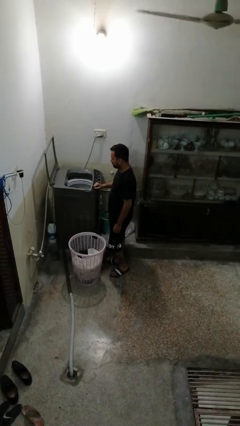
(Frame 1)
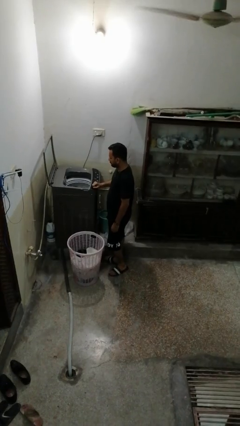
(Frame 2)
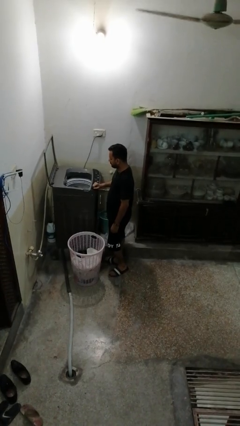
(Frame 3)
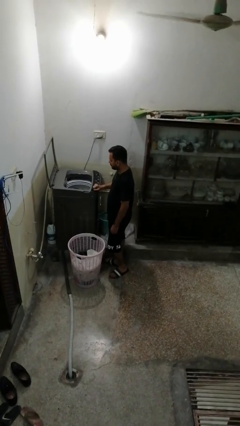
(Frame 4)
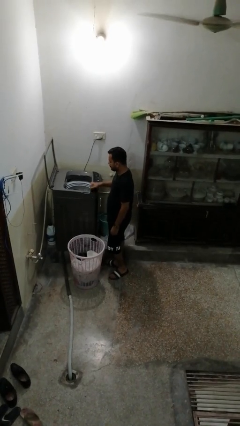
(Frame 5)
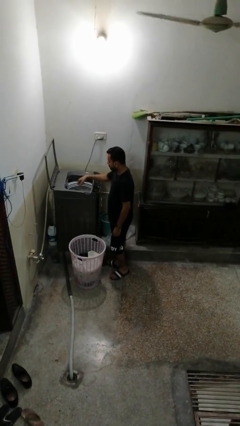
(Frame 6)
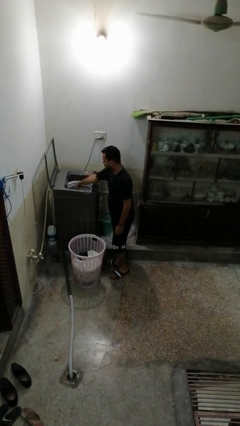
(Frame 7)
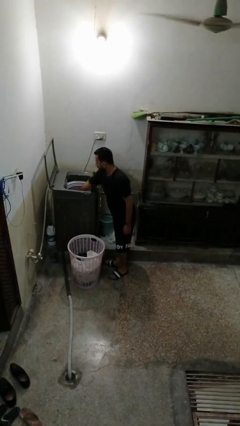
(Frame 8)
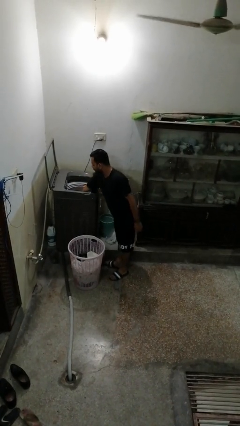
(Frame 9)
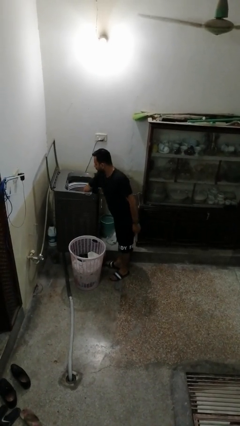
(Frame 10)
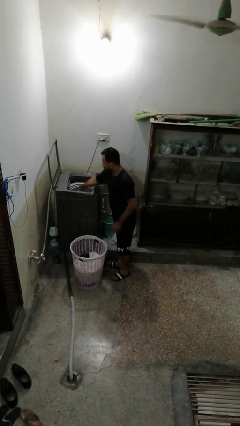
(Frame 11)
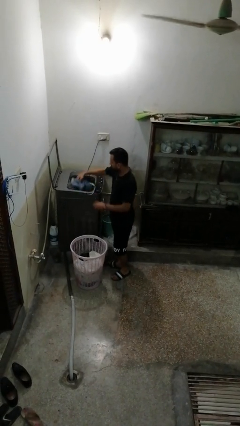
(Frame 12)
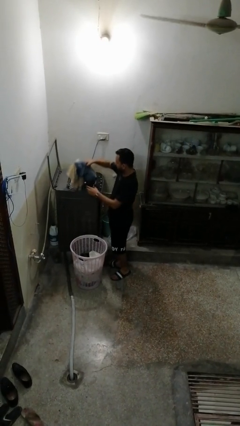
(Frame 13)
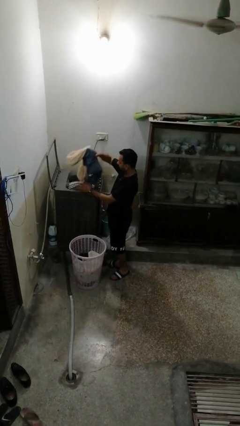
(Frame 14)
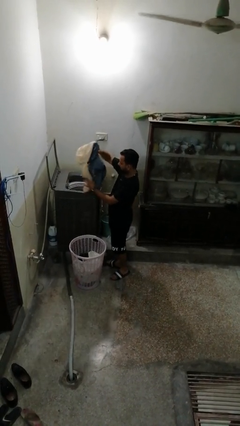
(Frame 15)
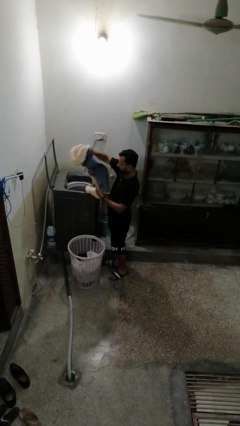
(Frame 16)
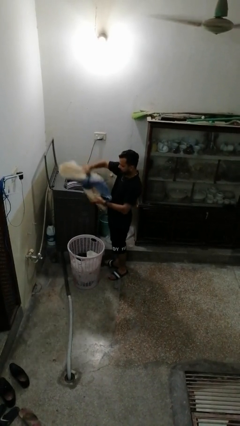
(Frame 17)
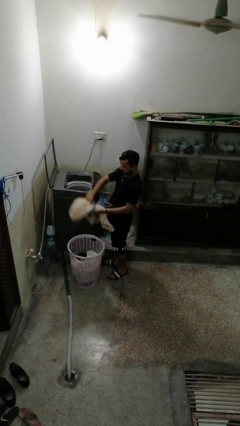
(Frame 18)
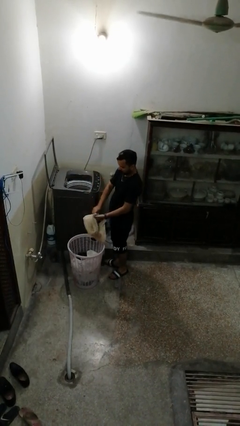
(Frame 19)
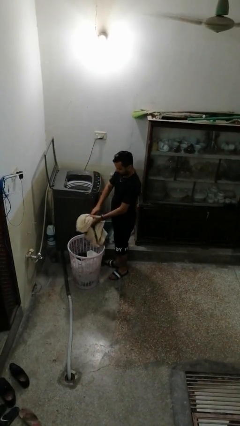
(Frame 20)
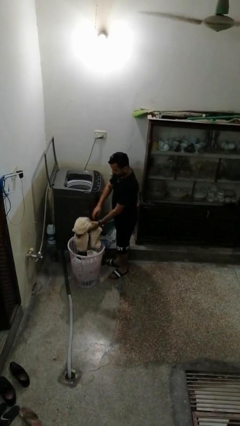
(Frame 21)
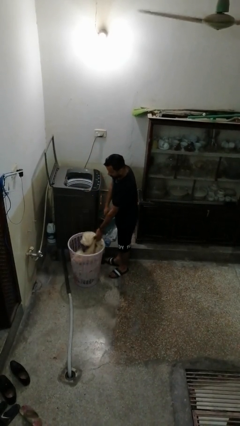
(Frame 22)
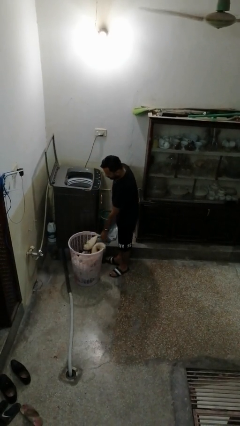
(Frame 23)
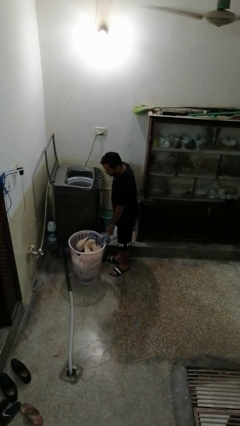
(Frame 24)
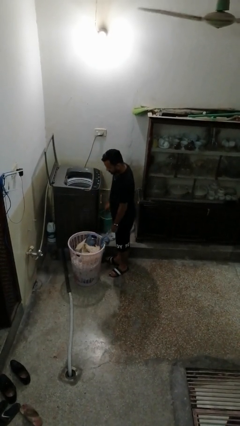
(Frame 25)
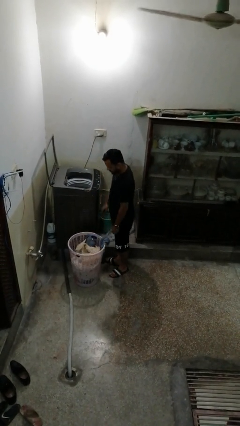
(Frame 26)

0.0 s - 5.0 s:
person unloads dryer

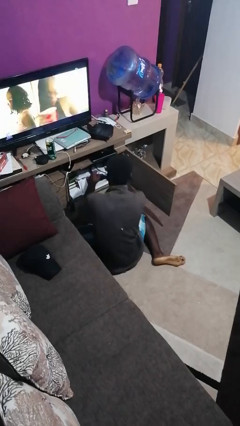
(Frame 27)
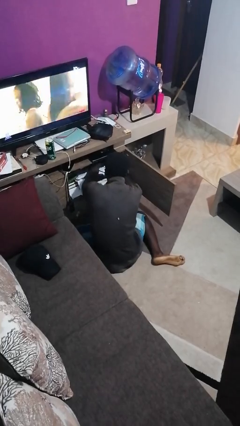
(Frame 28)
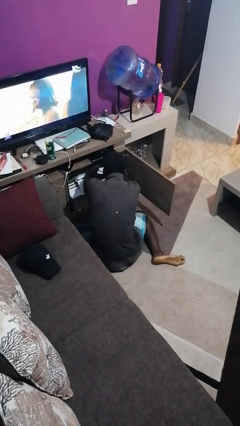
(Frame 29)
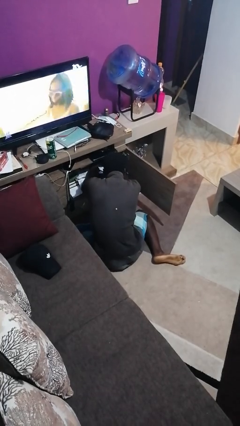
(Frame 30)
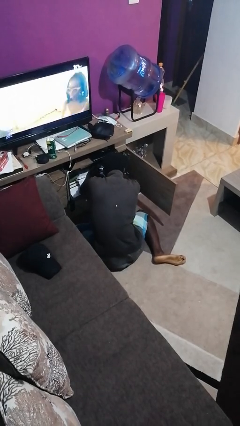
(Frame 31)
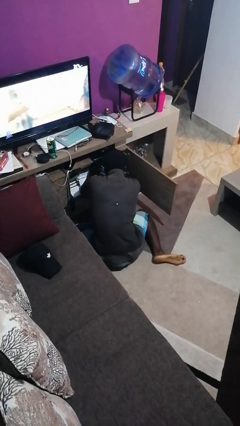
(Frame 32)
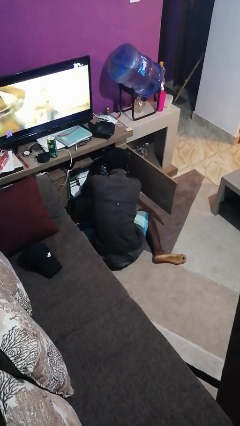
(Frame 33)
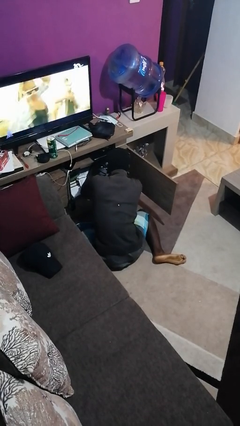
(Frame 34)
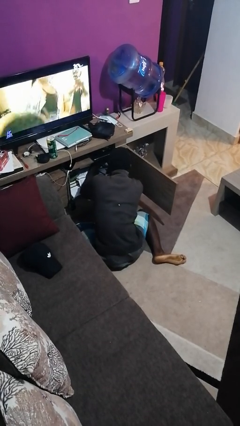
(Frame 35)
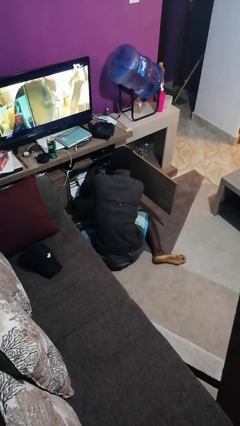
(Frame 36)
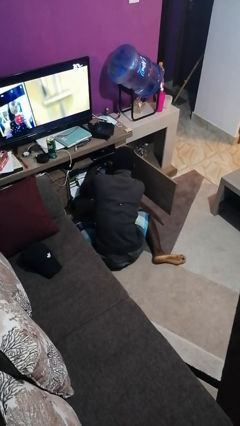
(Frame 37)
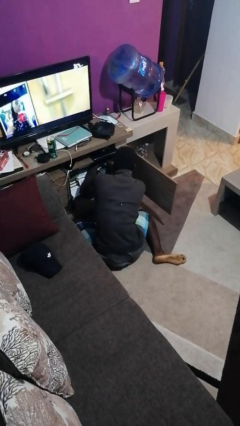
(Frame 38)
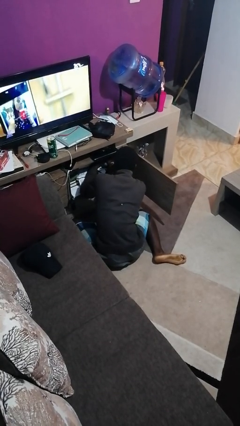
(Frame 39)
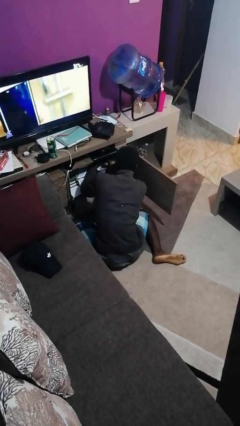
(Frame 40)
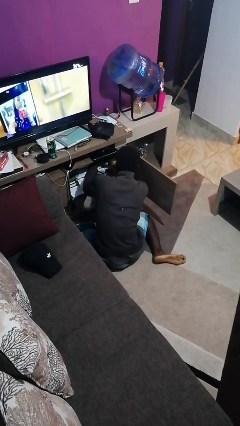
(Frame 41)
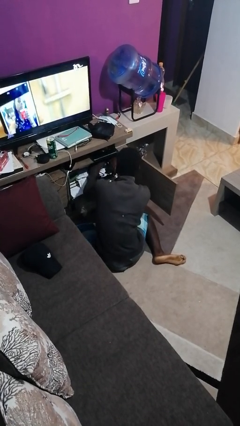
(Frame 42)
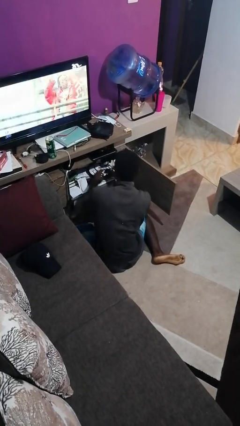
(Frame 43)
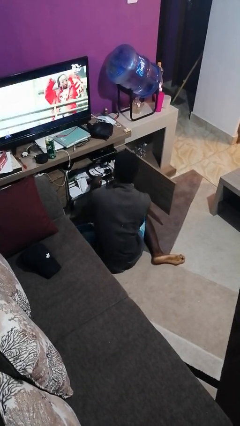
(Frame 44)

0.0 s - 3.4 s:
person searches in cabinet

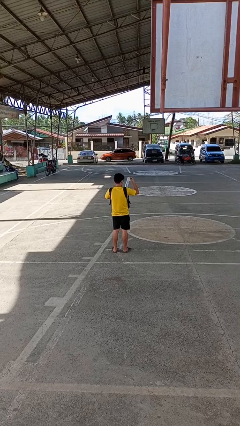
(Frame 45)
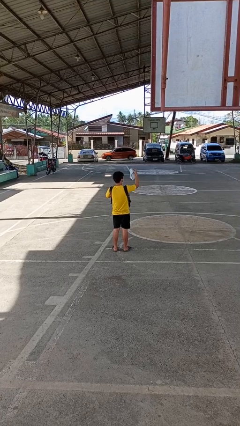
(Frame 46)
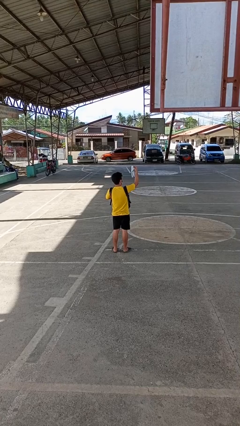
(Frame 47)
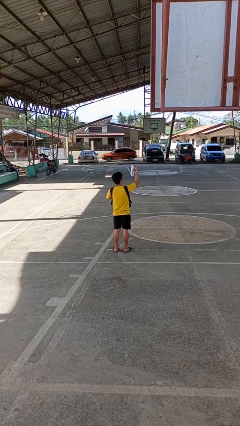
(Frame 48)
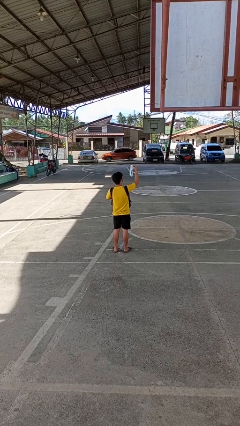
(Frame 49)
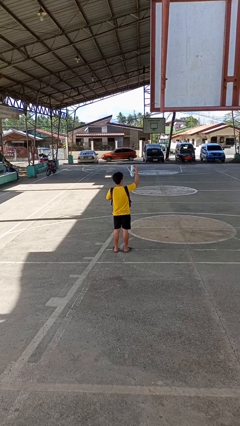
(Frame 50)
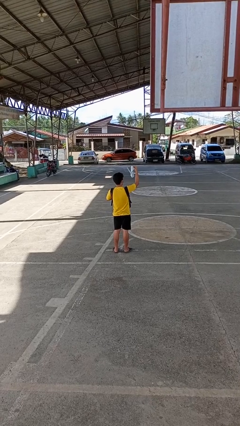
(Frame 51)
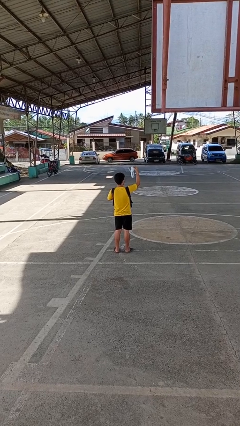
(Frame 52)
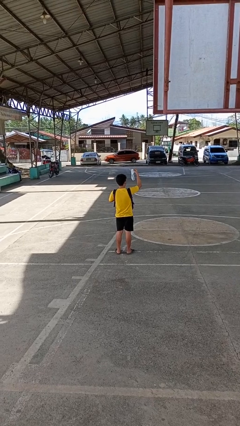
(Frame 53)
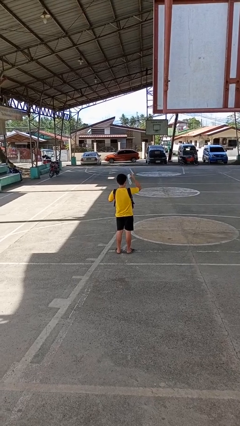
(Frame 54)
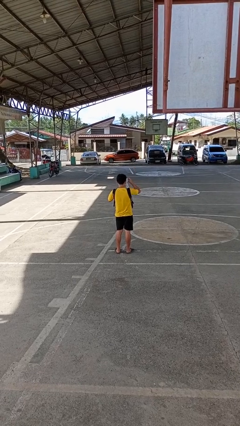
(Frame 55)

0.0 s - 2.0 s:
person takes object from backpack

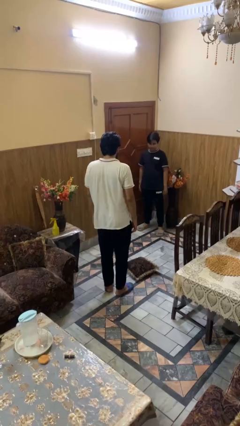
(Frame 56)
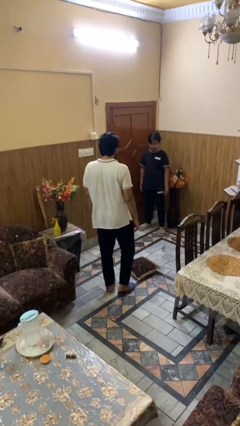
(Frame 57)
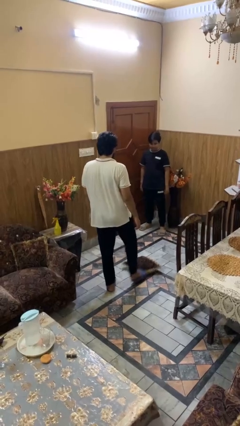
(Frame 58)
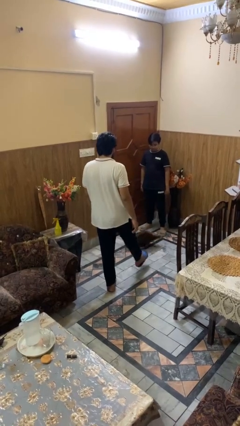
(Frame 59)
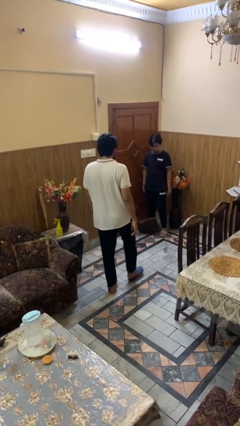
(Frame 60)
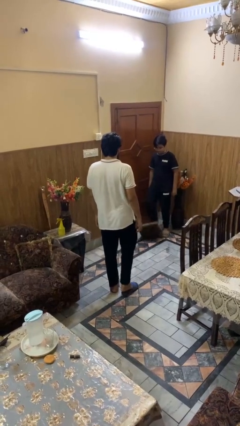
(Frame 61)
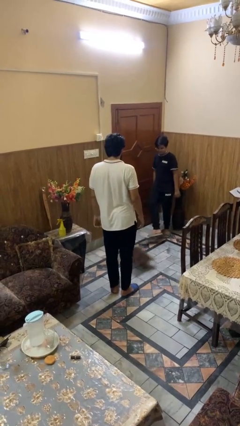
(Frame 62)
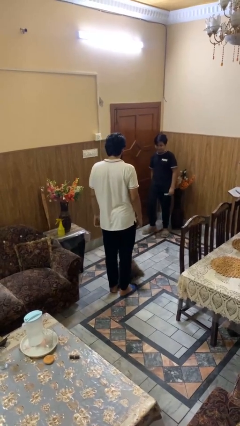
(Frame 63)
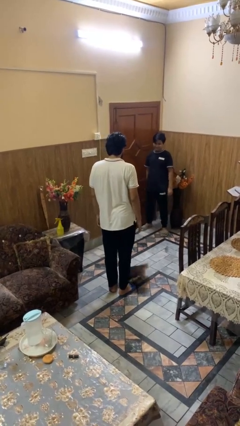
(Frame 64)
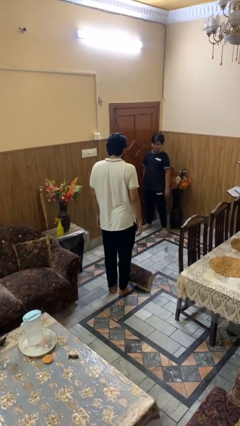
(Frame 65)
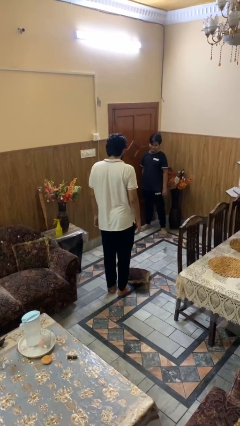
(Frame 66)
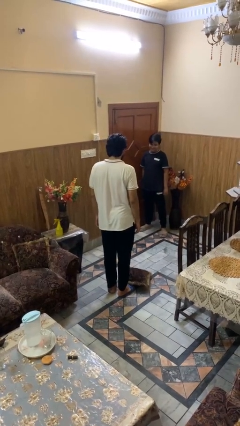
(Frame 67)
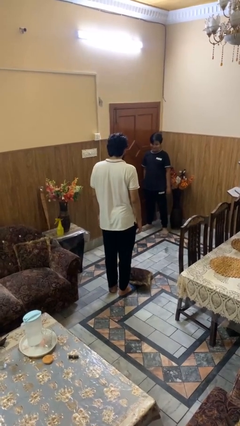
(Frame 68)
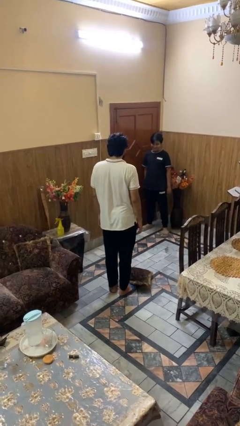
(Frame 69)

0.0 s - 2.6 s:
person kicks object to person

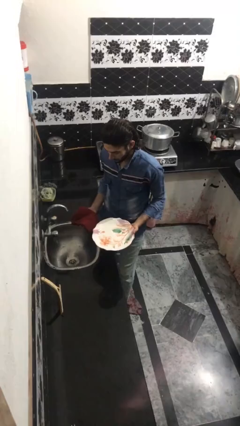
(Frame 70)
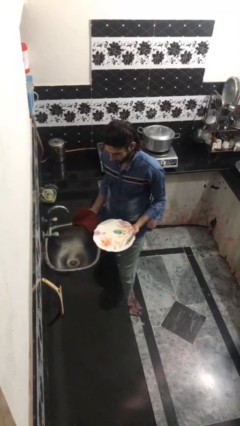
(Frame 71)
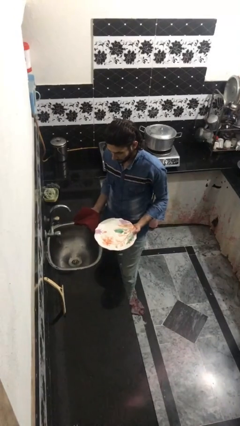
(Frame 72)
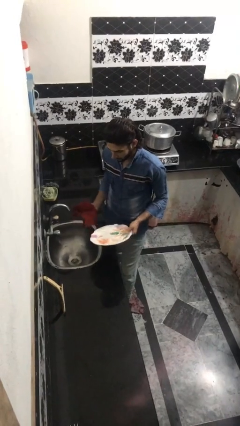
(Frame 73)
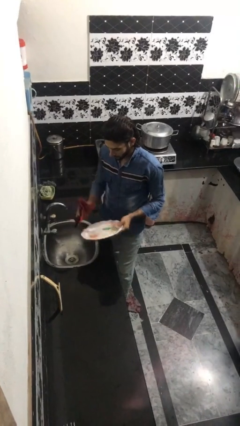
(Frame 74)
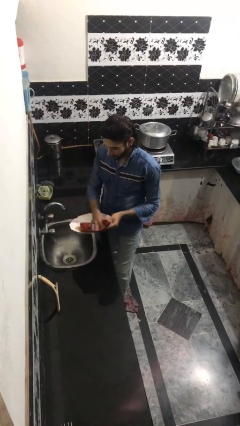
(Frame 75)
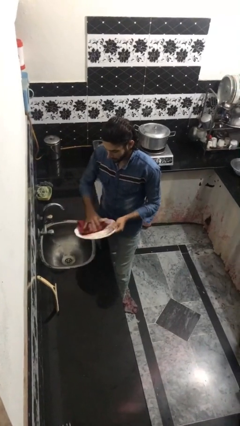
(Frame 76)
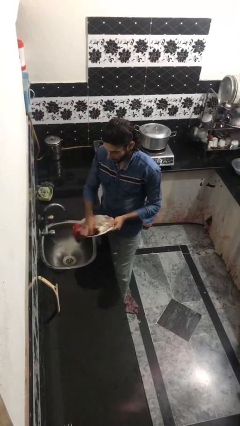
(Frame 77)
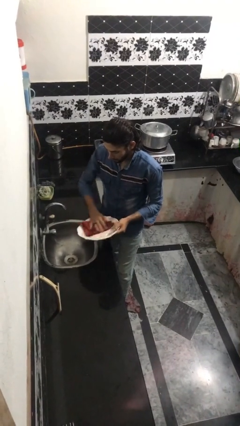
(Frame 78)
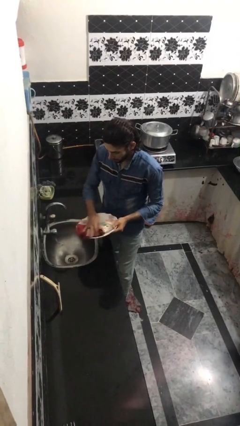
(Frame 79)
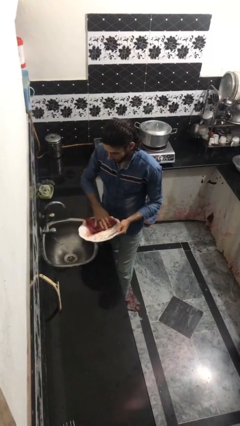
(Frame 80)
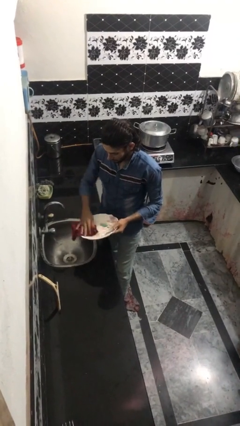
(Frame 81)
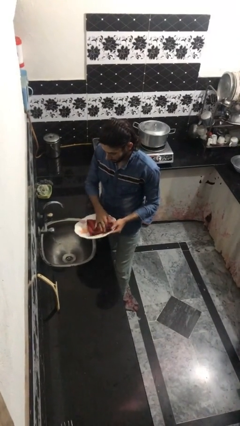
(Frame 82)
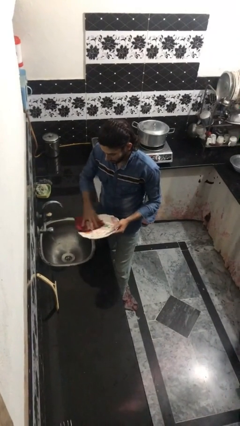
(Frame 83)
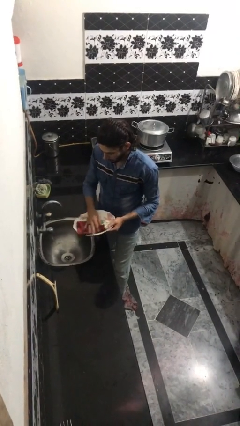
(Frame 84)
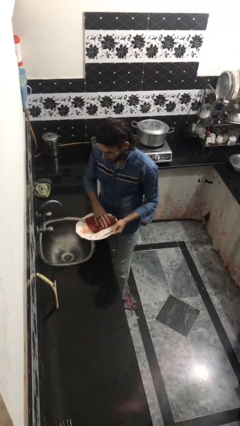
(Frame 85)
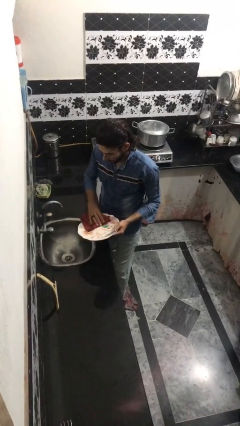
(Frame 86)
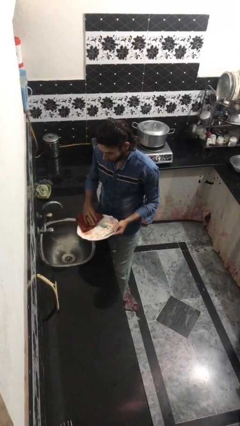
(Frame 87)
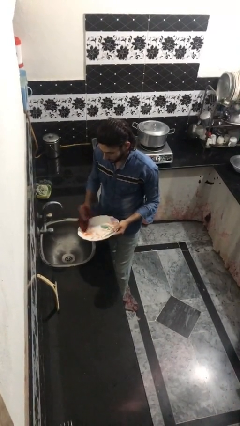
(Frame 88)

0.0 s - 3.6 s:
person dries dish

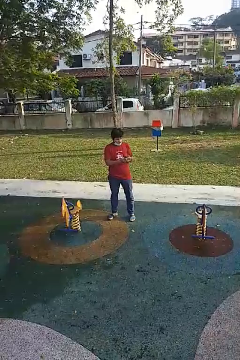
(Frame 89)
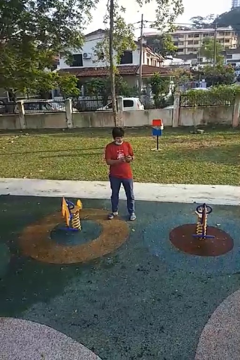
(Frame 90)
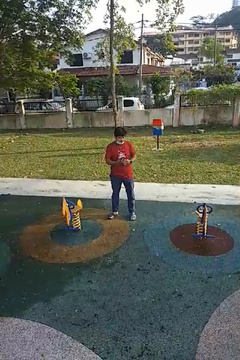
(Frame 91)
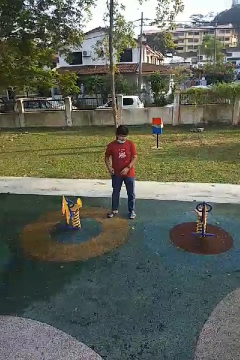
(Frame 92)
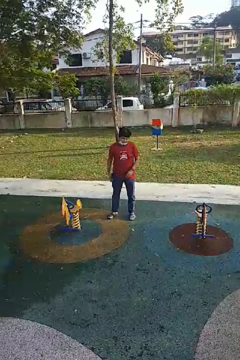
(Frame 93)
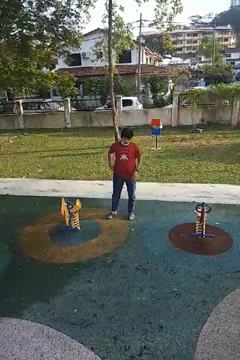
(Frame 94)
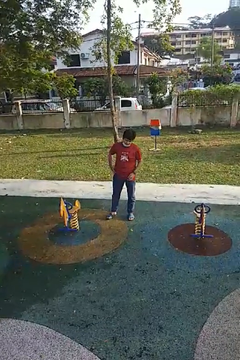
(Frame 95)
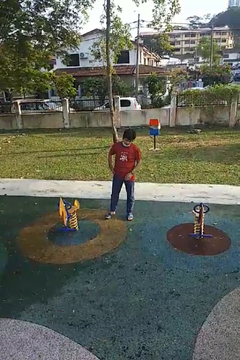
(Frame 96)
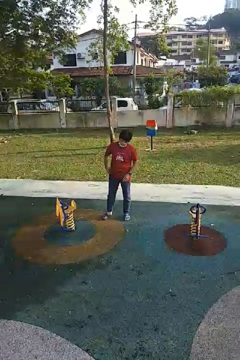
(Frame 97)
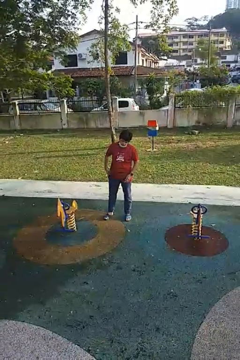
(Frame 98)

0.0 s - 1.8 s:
person puts phone into pocket
